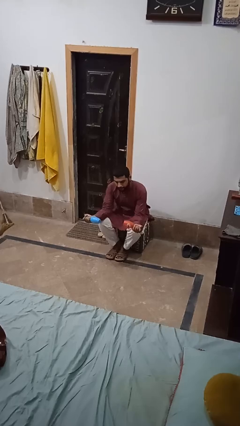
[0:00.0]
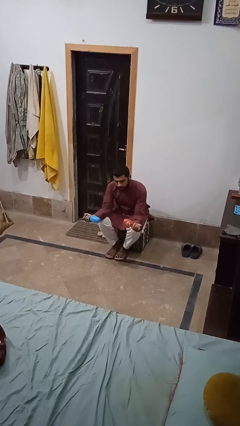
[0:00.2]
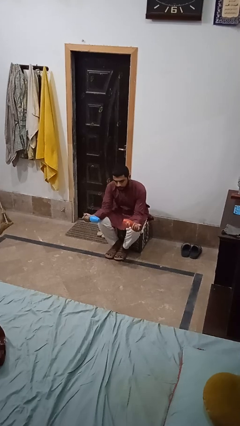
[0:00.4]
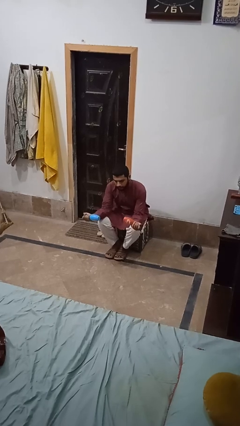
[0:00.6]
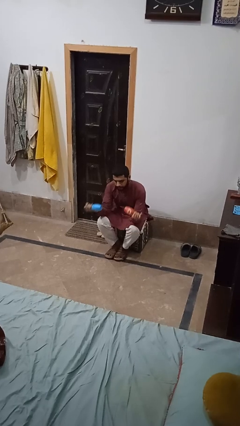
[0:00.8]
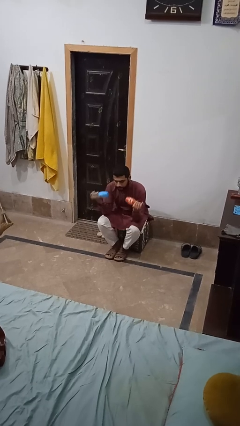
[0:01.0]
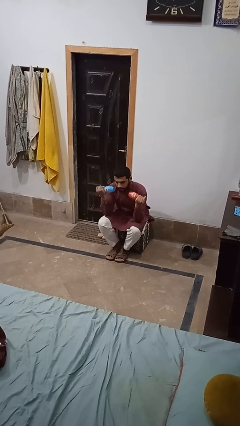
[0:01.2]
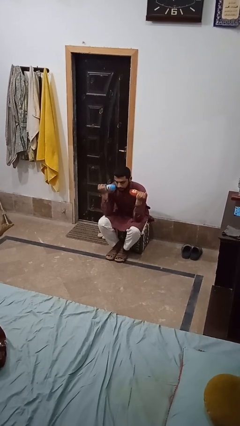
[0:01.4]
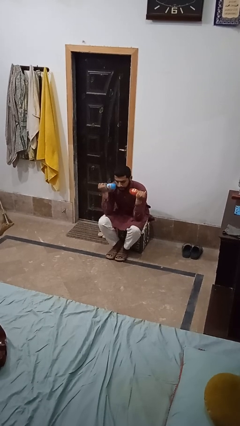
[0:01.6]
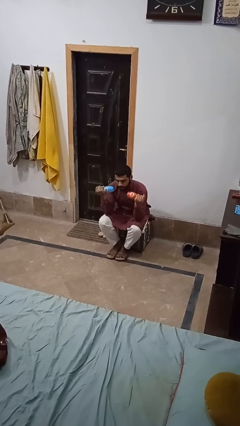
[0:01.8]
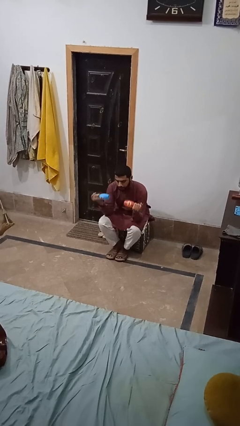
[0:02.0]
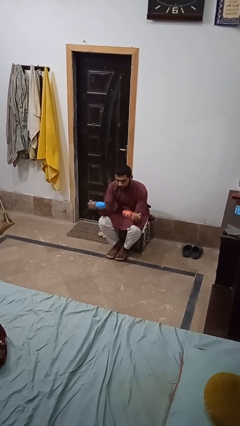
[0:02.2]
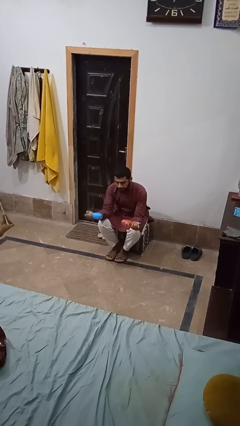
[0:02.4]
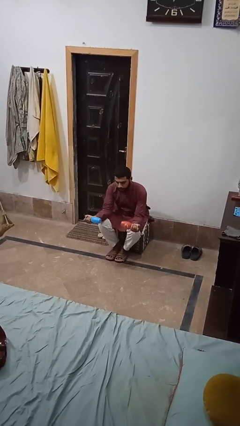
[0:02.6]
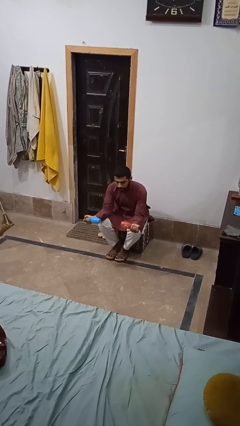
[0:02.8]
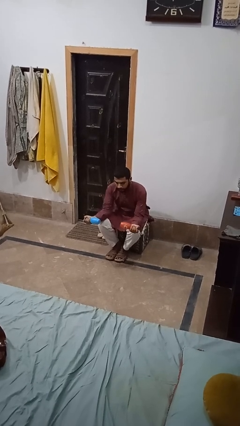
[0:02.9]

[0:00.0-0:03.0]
person lifts dumbbells

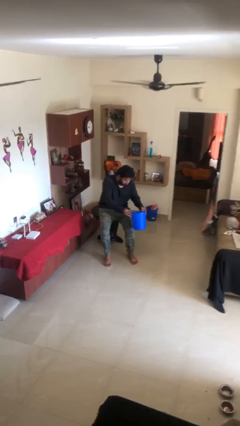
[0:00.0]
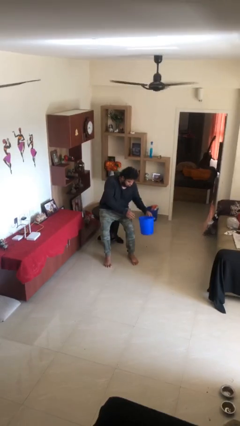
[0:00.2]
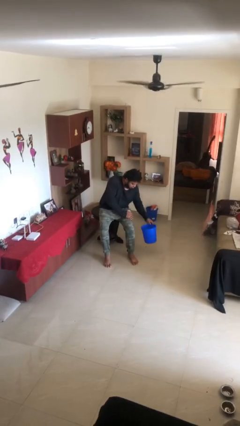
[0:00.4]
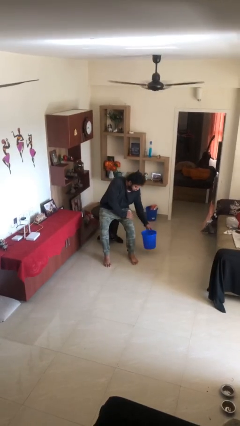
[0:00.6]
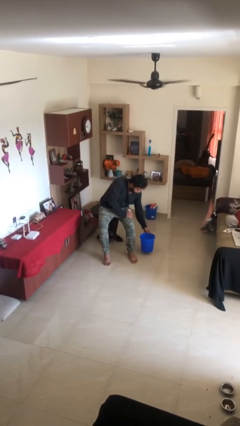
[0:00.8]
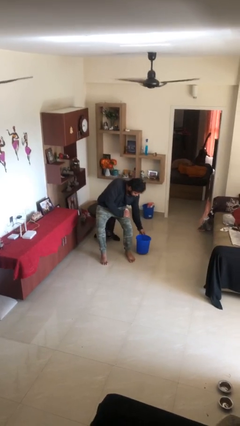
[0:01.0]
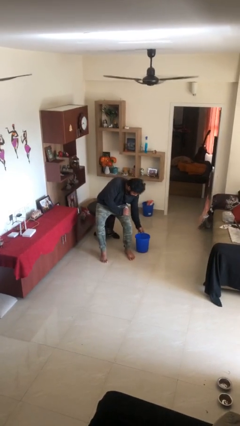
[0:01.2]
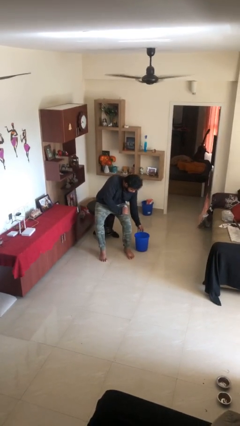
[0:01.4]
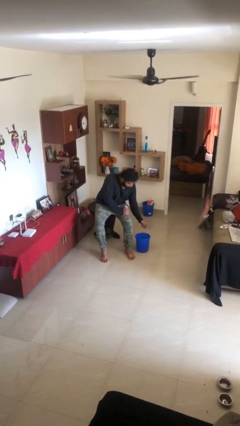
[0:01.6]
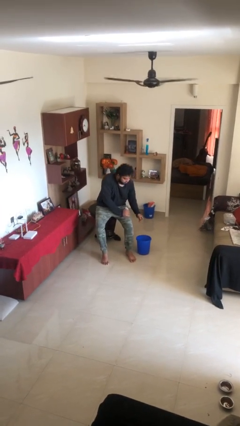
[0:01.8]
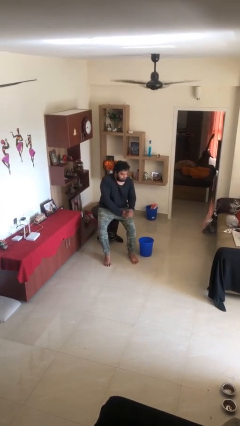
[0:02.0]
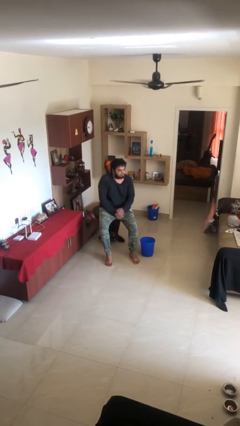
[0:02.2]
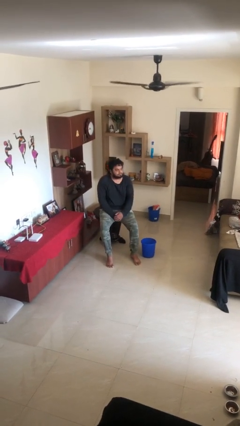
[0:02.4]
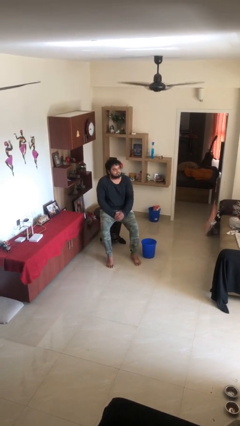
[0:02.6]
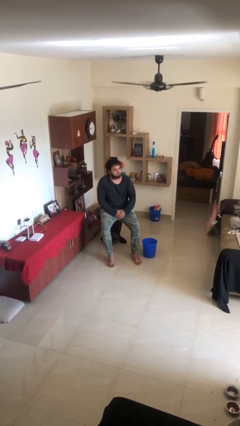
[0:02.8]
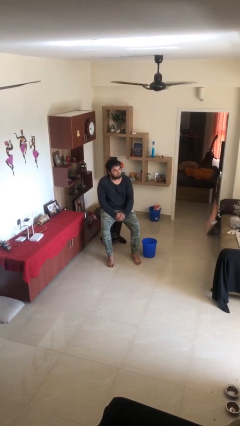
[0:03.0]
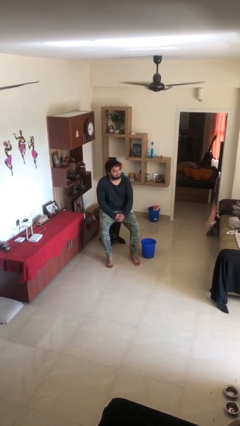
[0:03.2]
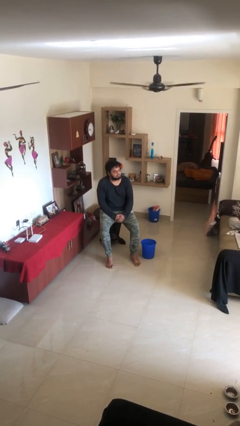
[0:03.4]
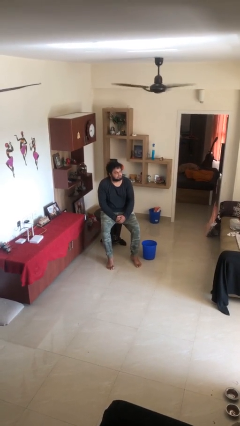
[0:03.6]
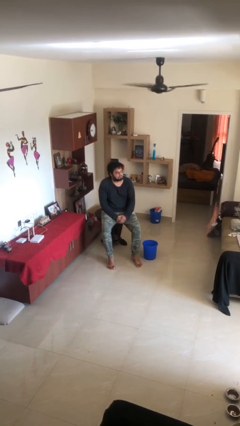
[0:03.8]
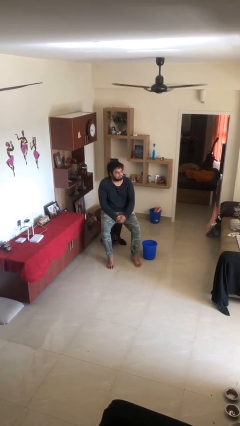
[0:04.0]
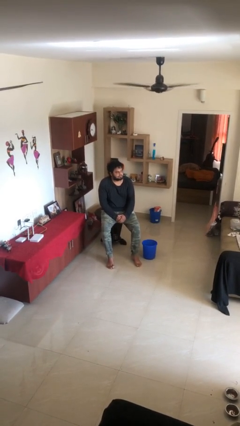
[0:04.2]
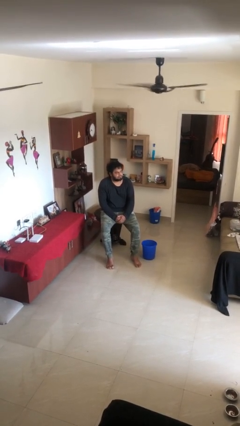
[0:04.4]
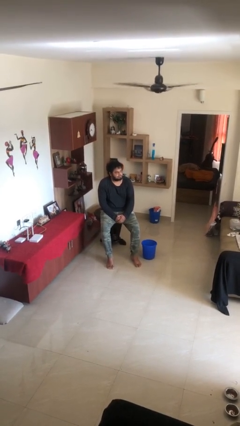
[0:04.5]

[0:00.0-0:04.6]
person puts down object on floor

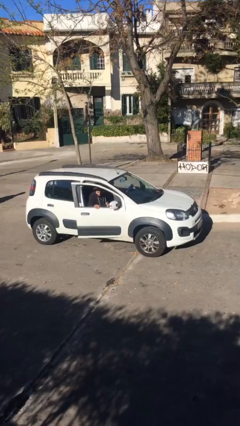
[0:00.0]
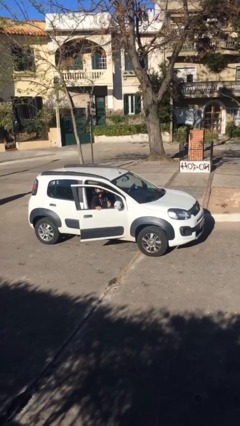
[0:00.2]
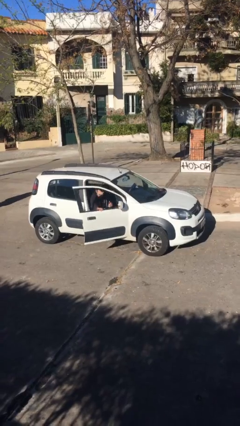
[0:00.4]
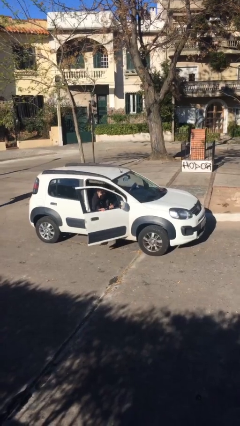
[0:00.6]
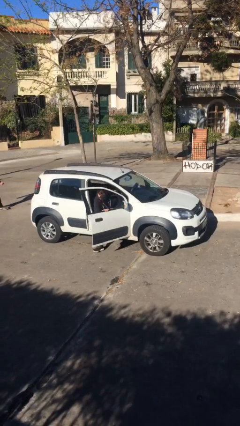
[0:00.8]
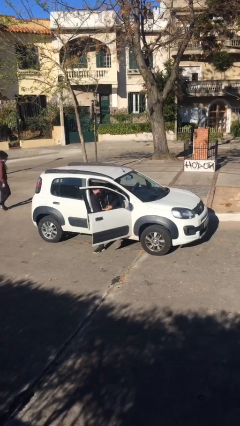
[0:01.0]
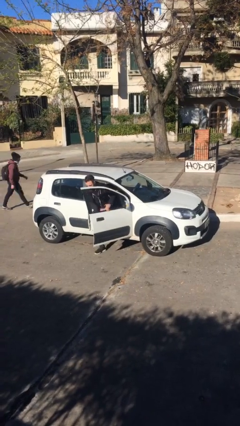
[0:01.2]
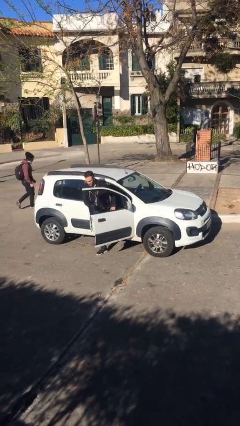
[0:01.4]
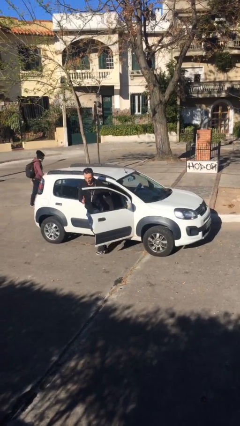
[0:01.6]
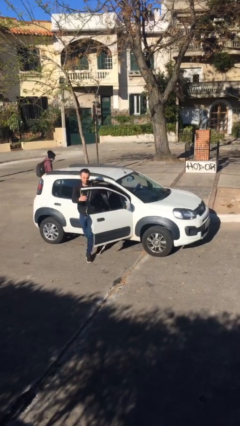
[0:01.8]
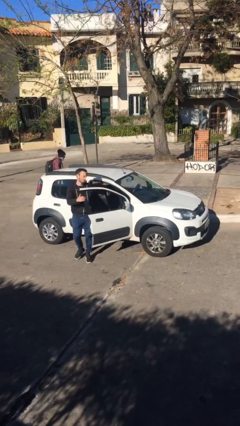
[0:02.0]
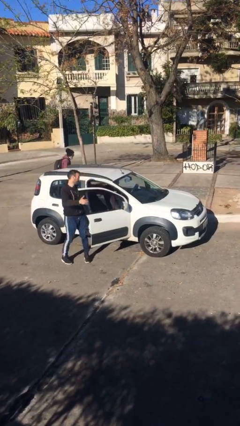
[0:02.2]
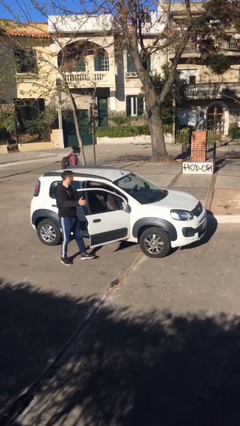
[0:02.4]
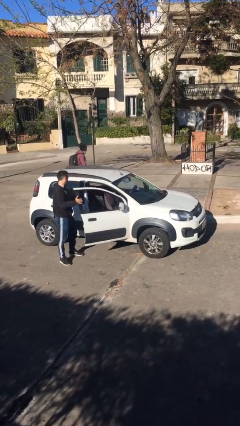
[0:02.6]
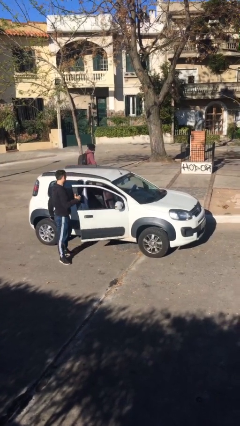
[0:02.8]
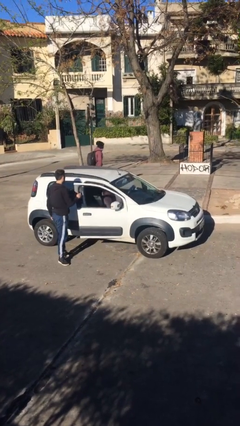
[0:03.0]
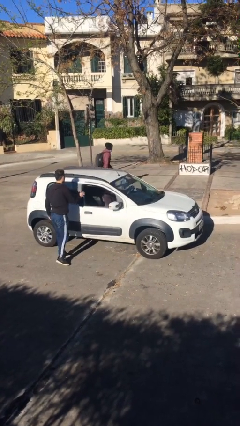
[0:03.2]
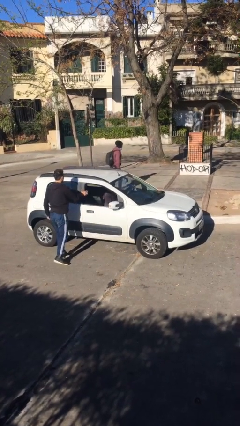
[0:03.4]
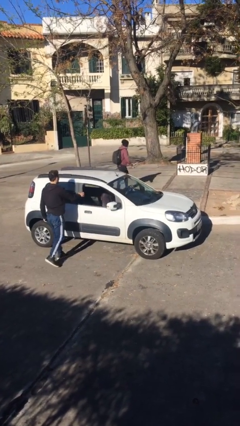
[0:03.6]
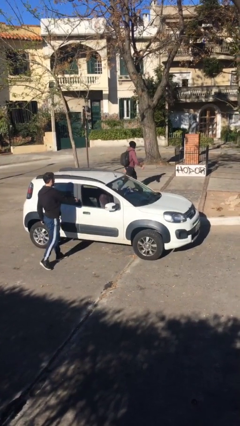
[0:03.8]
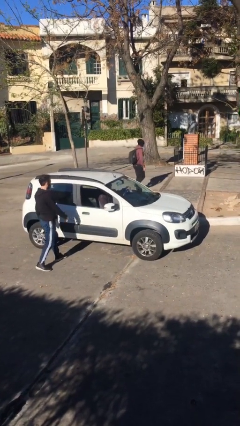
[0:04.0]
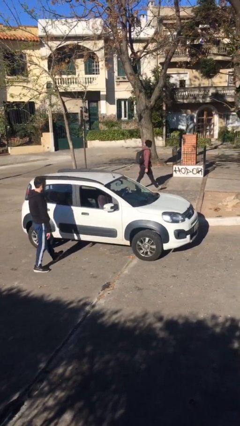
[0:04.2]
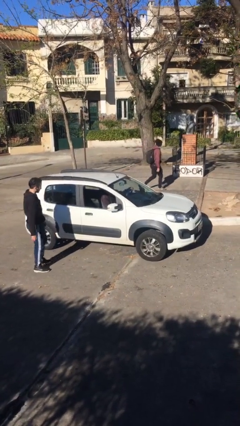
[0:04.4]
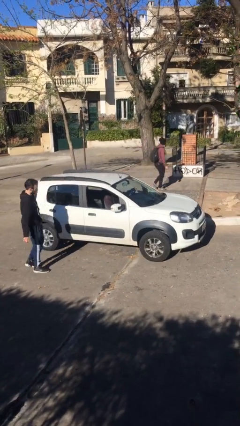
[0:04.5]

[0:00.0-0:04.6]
car drops off person

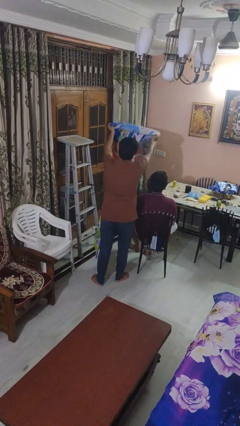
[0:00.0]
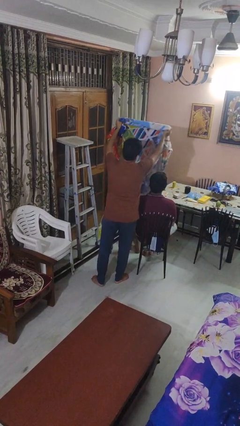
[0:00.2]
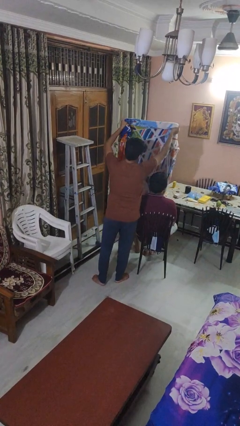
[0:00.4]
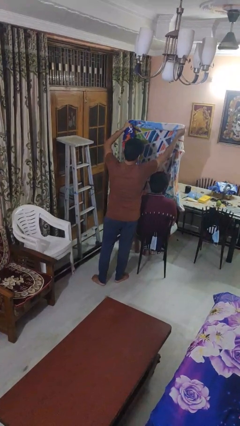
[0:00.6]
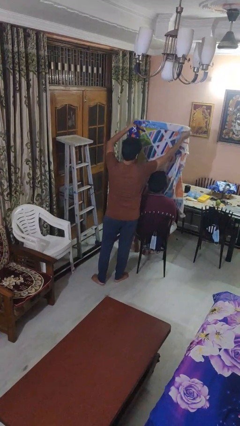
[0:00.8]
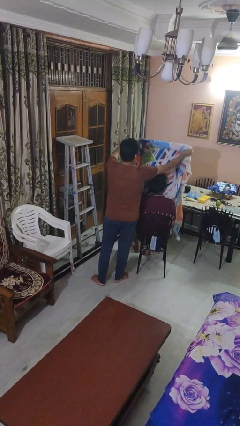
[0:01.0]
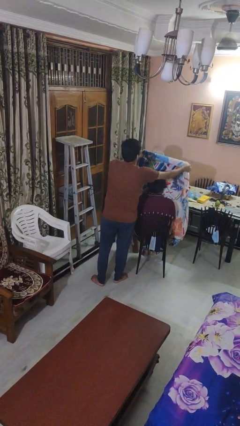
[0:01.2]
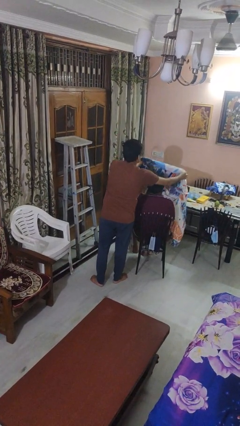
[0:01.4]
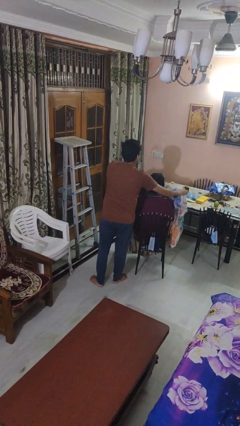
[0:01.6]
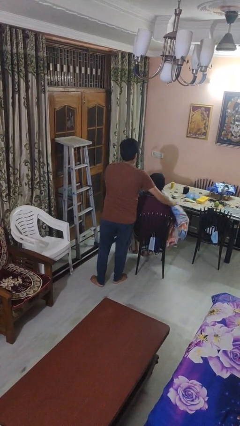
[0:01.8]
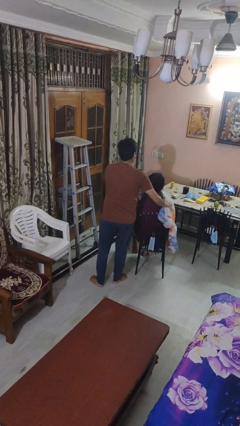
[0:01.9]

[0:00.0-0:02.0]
person covers friend with blanket

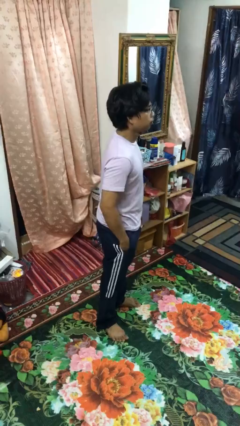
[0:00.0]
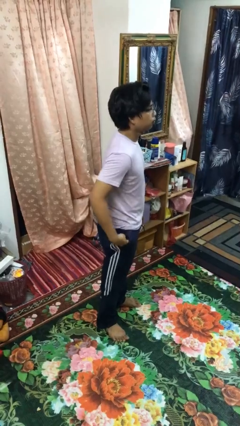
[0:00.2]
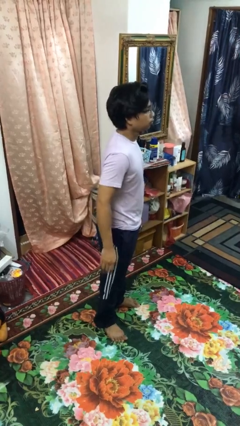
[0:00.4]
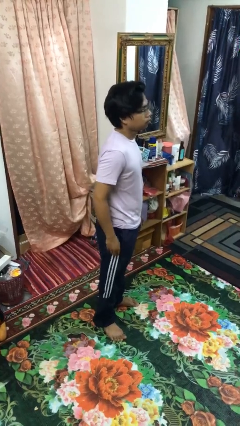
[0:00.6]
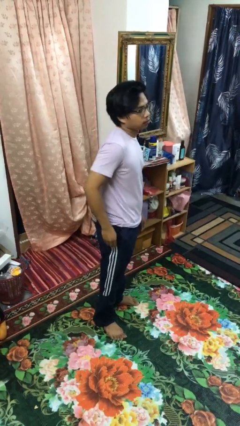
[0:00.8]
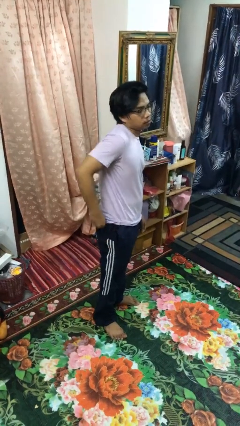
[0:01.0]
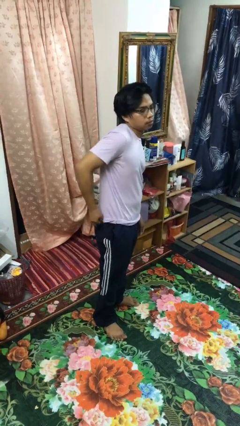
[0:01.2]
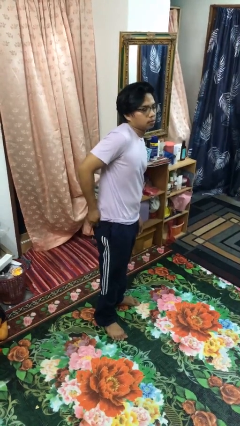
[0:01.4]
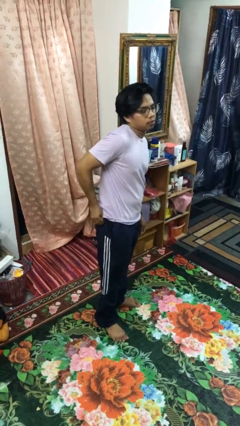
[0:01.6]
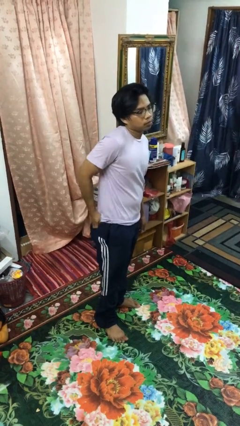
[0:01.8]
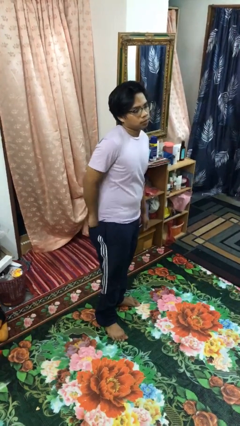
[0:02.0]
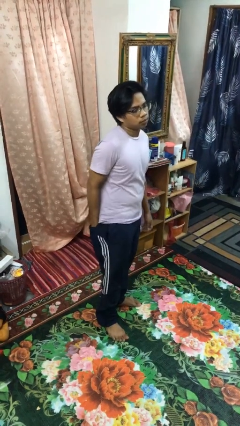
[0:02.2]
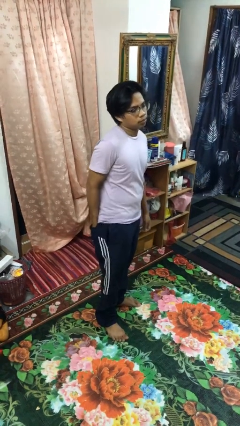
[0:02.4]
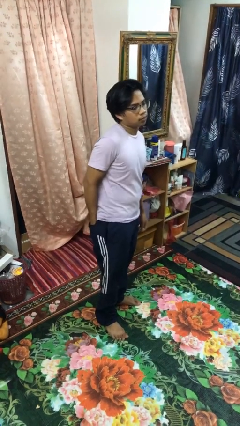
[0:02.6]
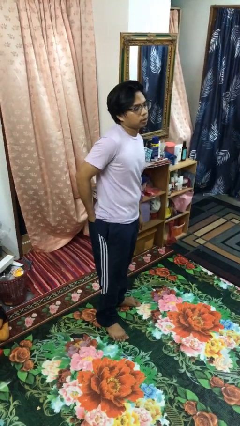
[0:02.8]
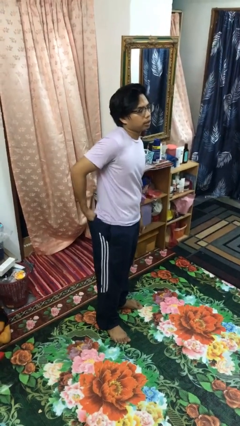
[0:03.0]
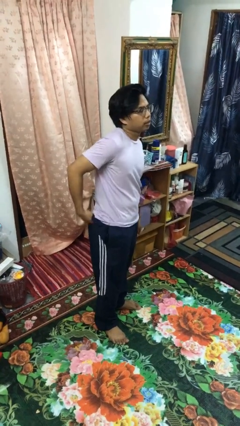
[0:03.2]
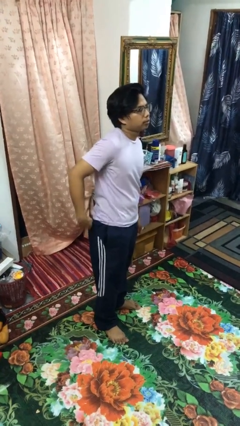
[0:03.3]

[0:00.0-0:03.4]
person puts hands in back pockets
